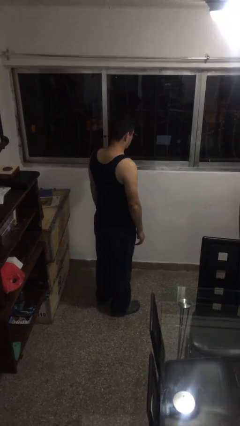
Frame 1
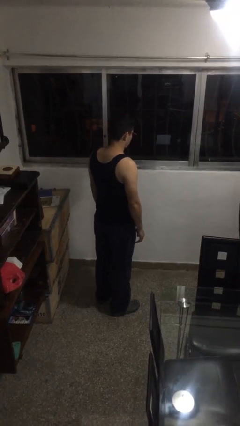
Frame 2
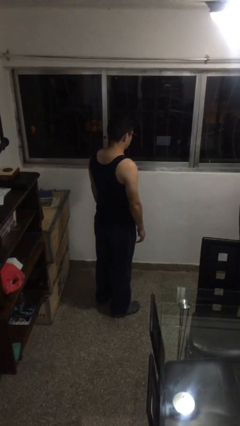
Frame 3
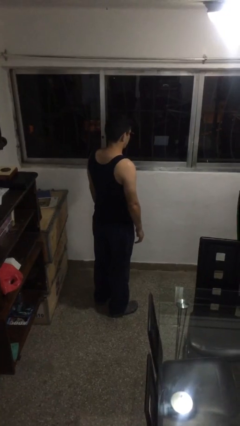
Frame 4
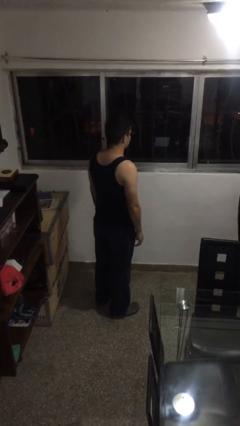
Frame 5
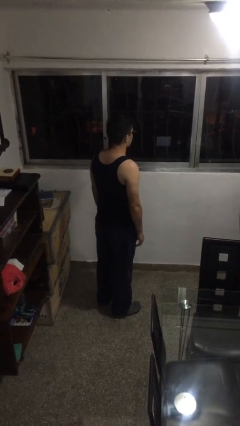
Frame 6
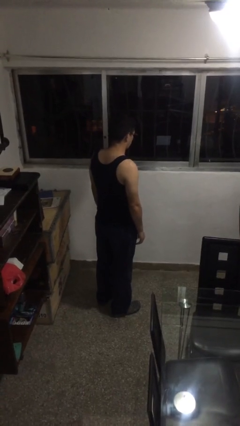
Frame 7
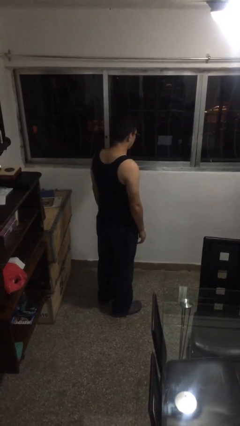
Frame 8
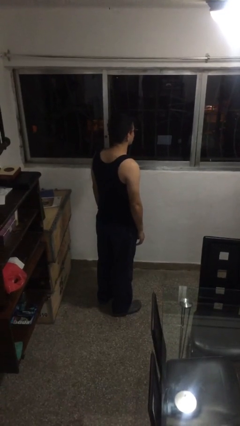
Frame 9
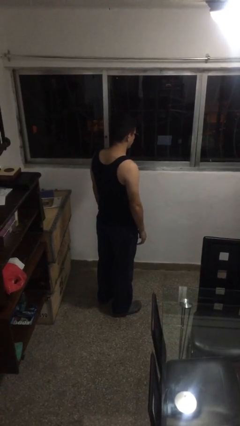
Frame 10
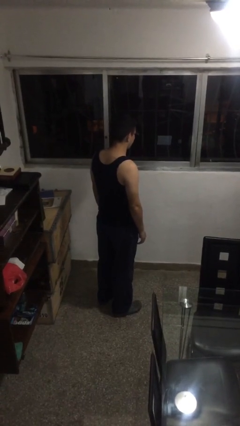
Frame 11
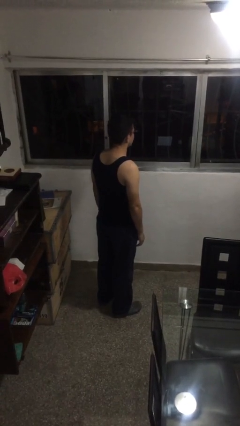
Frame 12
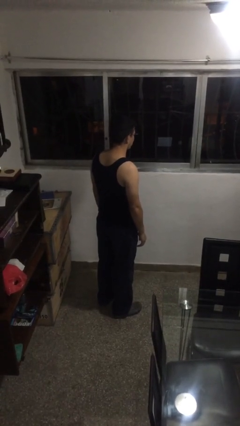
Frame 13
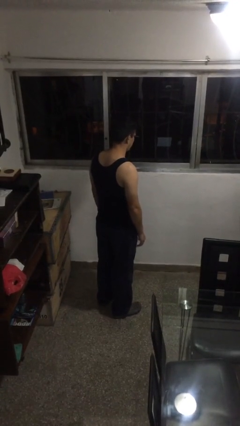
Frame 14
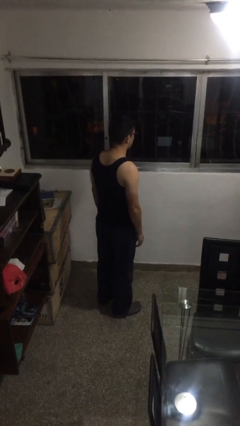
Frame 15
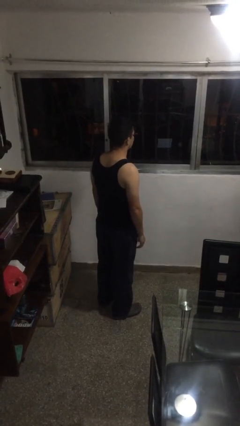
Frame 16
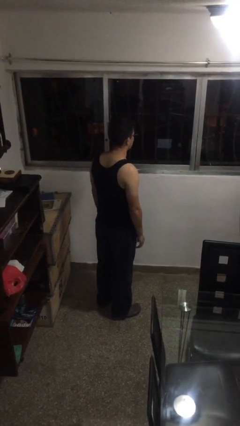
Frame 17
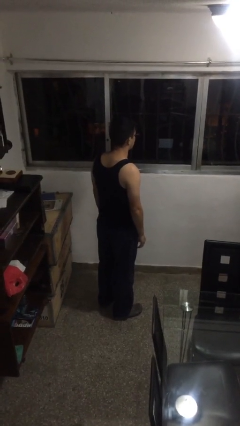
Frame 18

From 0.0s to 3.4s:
person nods head

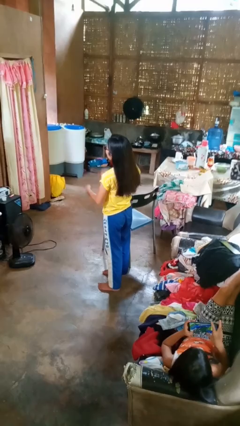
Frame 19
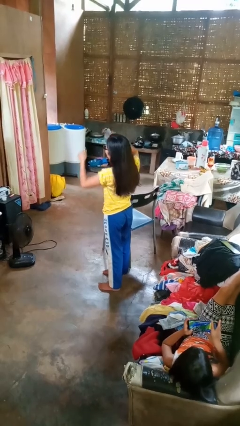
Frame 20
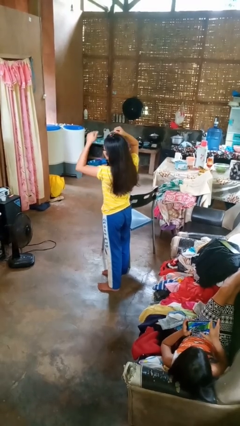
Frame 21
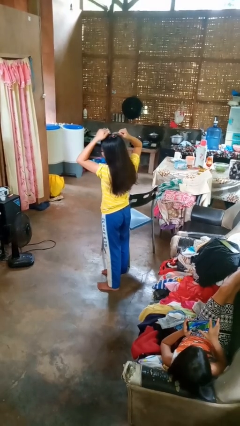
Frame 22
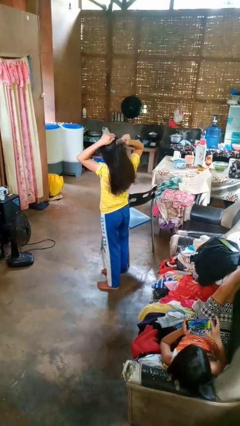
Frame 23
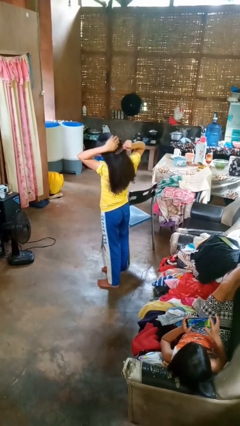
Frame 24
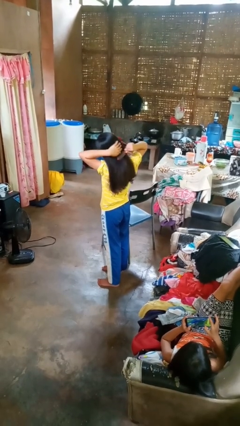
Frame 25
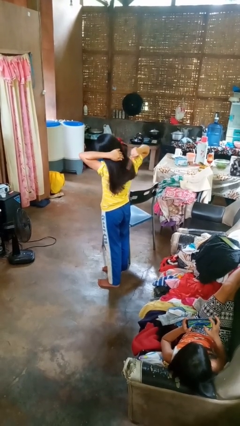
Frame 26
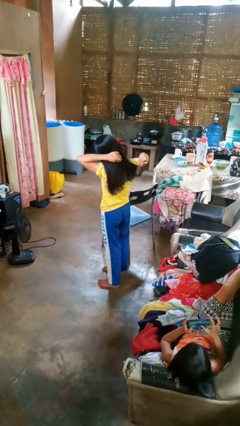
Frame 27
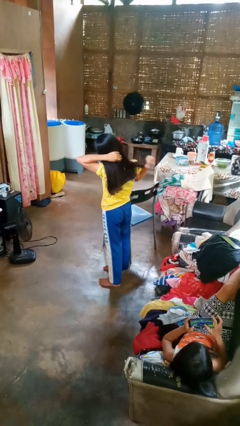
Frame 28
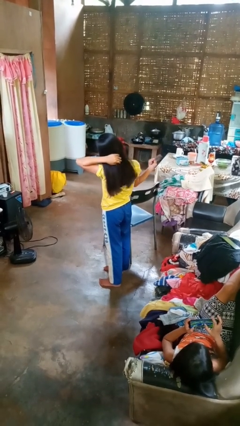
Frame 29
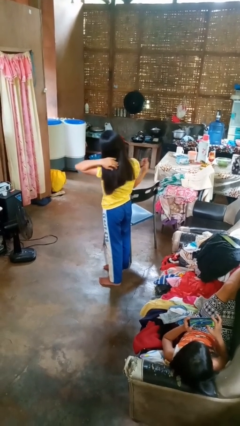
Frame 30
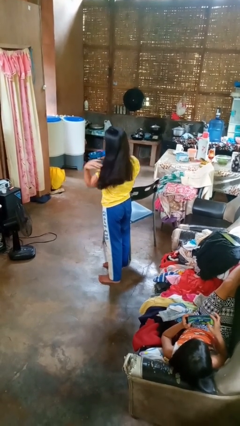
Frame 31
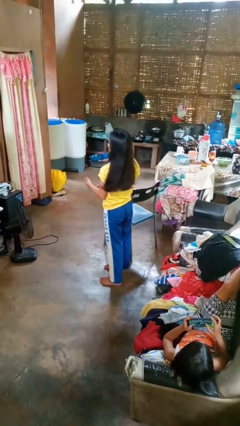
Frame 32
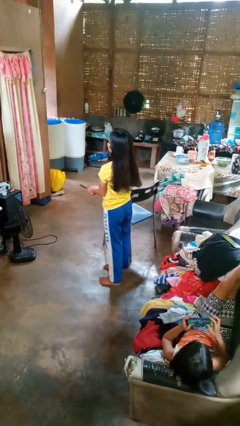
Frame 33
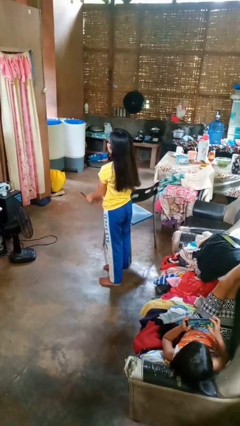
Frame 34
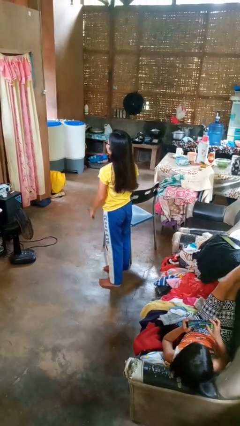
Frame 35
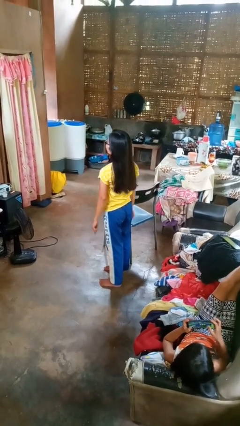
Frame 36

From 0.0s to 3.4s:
person brushes hair

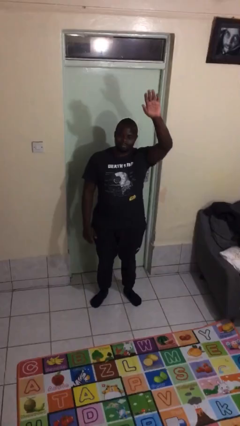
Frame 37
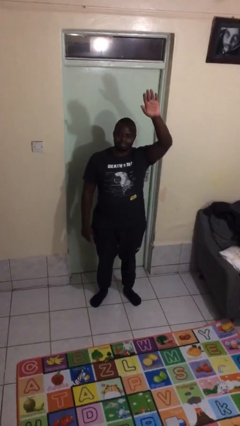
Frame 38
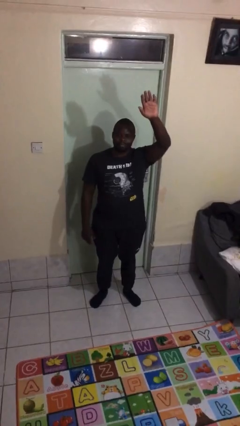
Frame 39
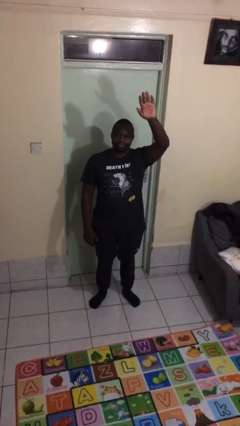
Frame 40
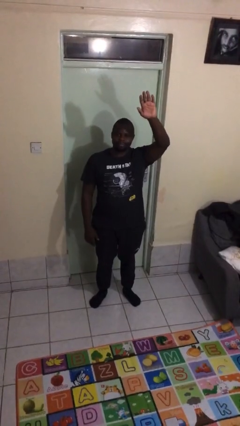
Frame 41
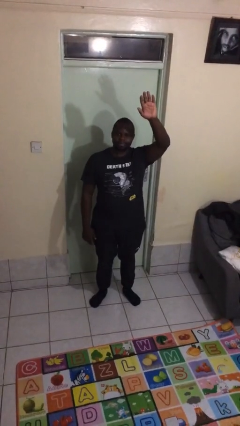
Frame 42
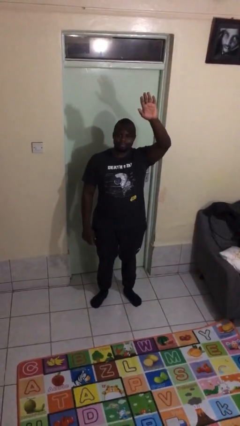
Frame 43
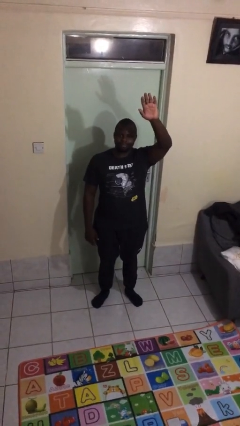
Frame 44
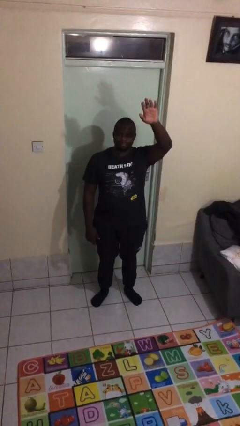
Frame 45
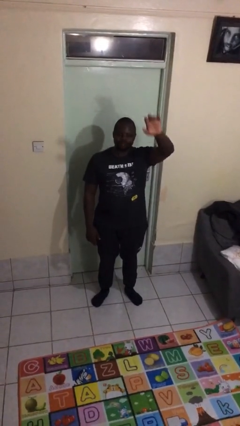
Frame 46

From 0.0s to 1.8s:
person gestures raise hand

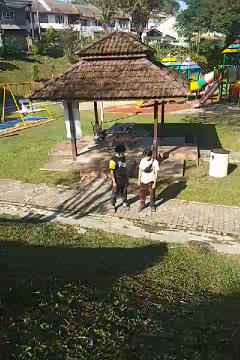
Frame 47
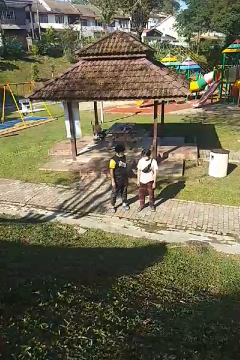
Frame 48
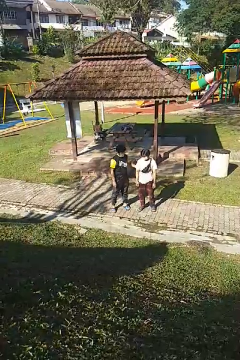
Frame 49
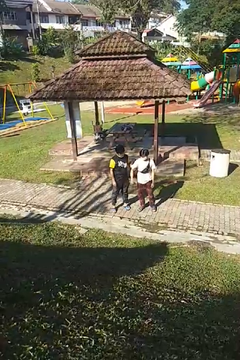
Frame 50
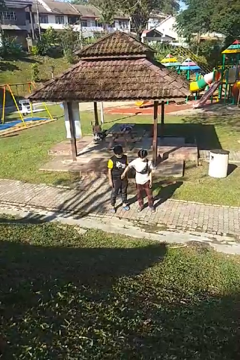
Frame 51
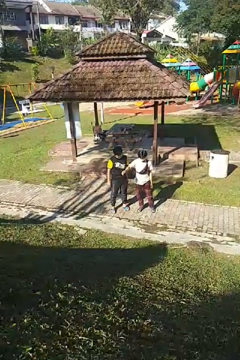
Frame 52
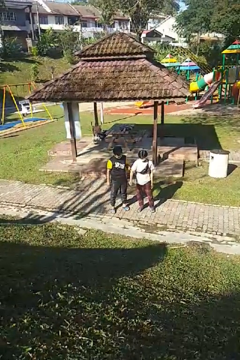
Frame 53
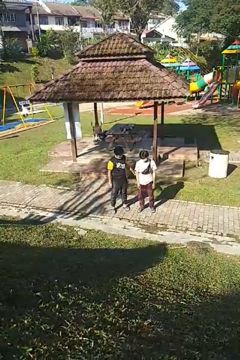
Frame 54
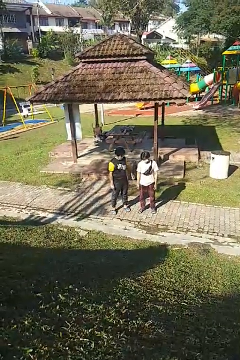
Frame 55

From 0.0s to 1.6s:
person grabs person by hair

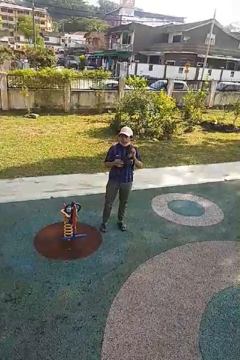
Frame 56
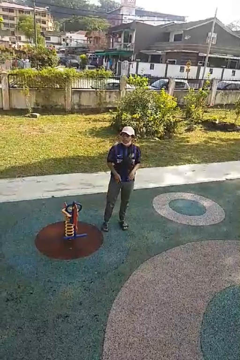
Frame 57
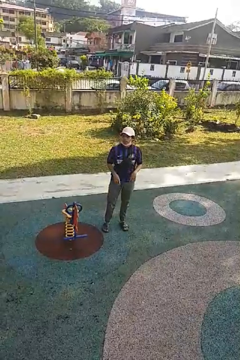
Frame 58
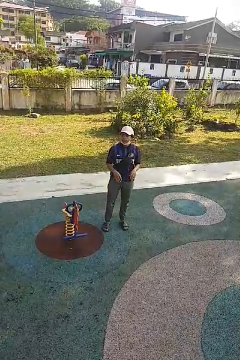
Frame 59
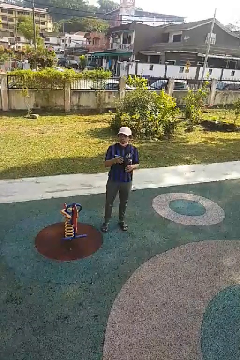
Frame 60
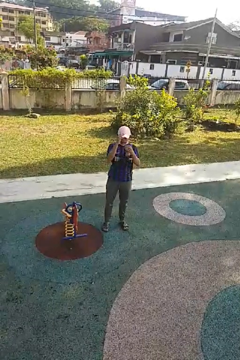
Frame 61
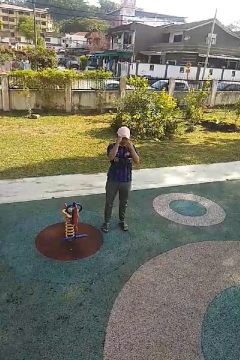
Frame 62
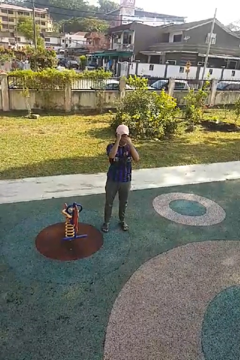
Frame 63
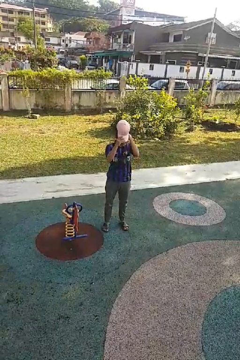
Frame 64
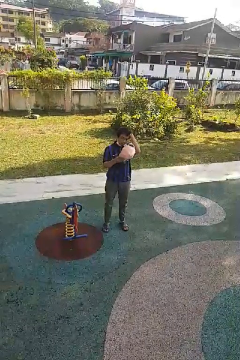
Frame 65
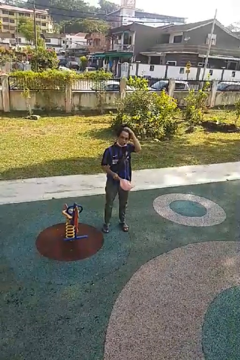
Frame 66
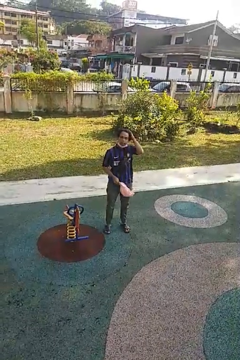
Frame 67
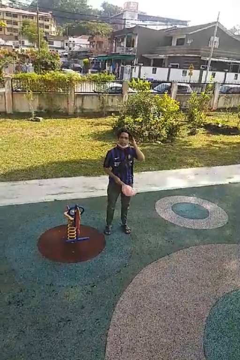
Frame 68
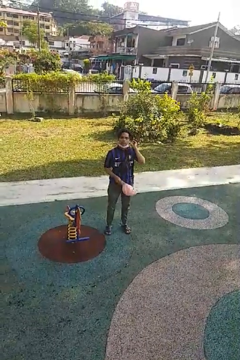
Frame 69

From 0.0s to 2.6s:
person takes off hat

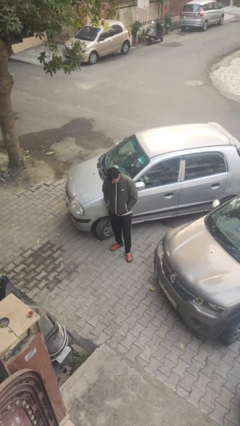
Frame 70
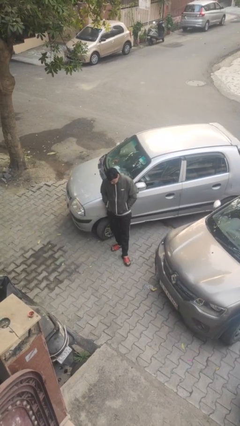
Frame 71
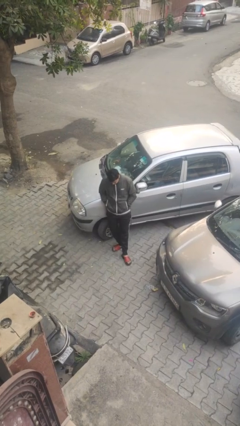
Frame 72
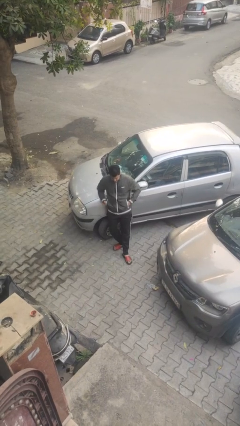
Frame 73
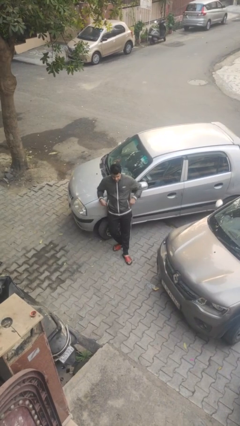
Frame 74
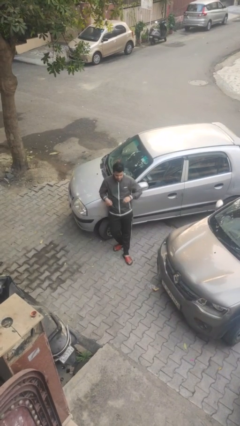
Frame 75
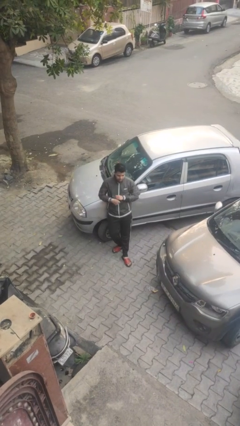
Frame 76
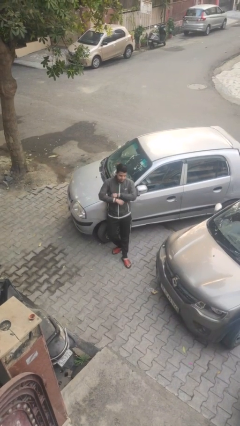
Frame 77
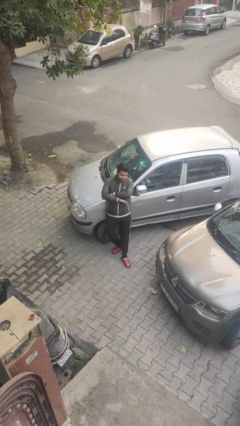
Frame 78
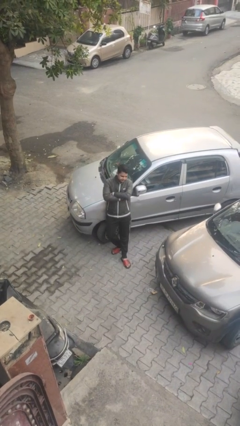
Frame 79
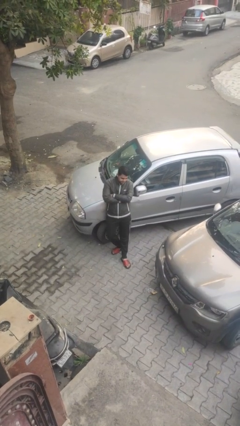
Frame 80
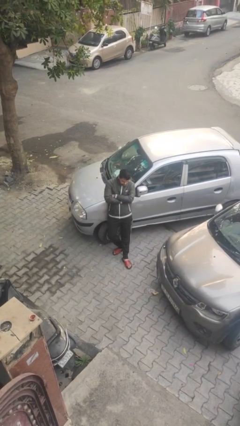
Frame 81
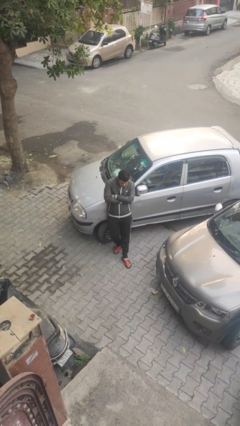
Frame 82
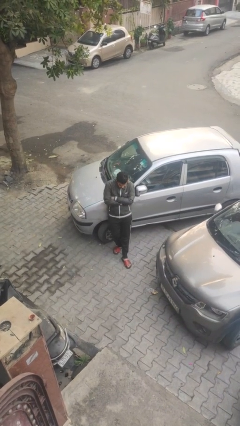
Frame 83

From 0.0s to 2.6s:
person leans against car

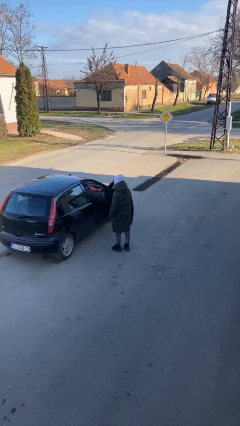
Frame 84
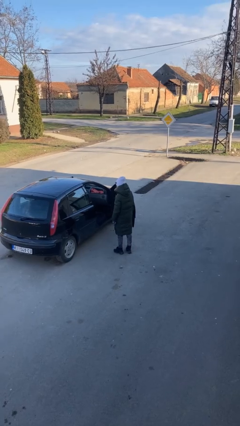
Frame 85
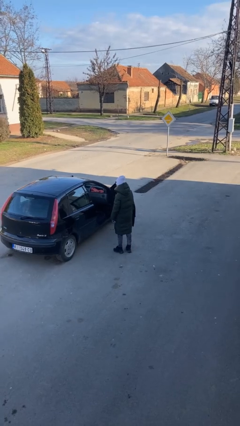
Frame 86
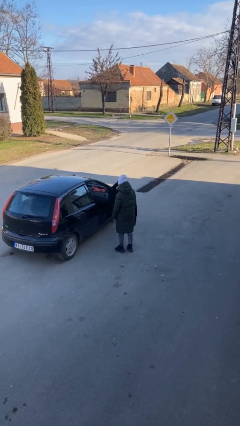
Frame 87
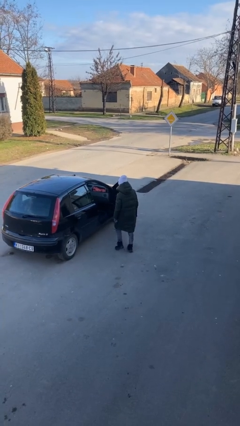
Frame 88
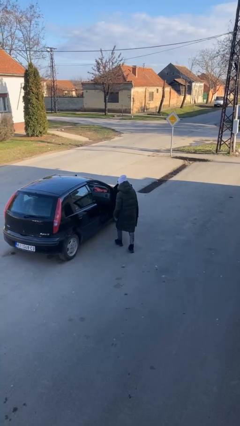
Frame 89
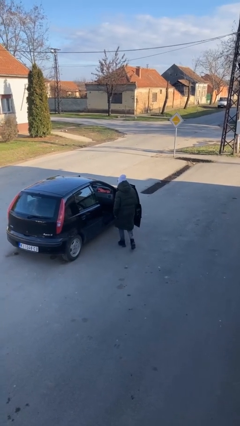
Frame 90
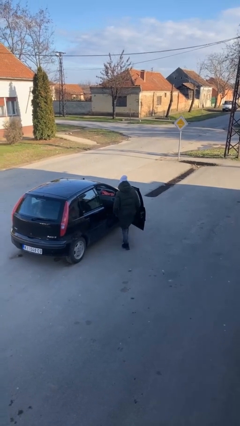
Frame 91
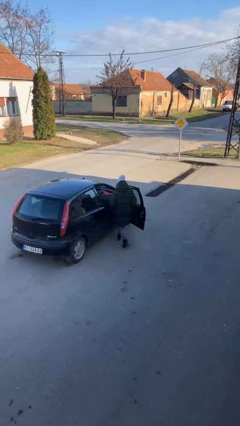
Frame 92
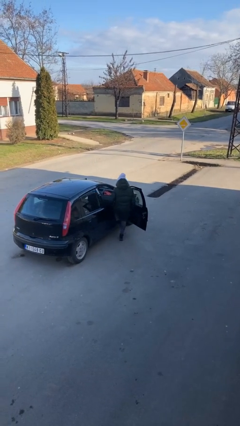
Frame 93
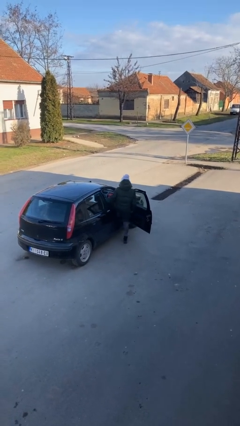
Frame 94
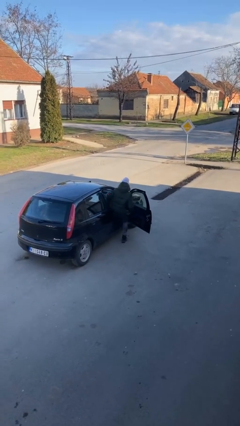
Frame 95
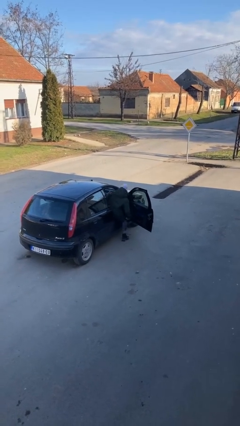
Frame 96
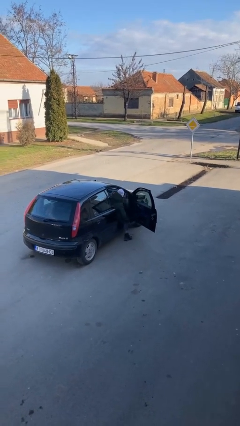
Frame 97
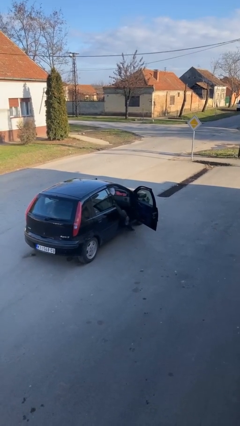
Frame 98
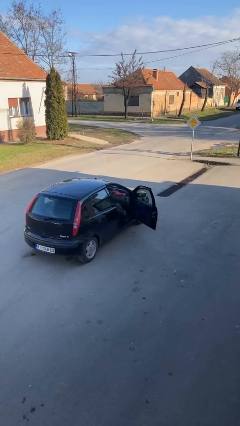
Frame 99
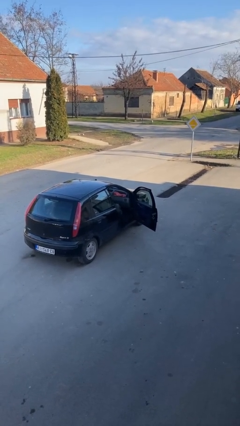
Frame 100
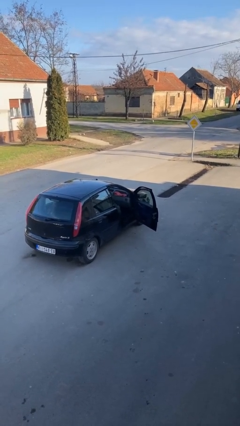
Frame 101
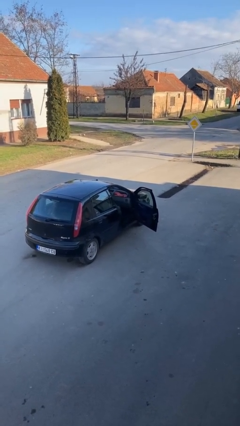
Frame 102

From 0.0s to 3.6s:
person enters car
